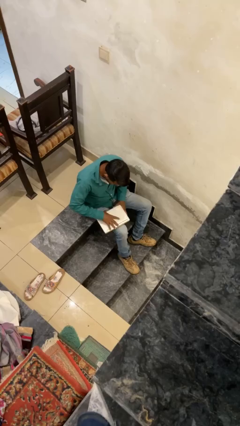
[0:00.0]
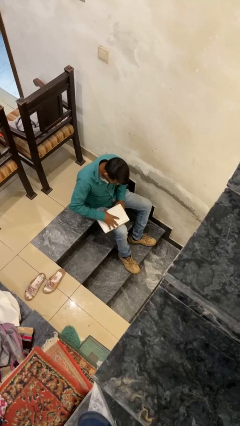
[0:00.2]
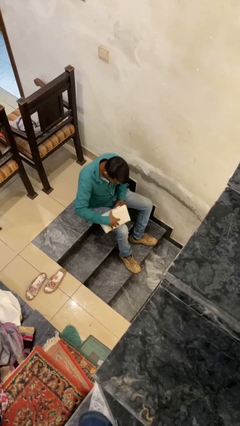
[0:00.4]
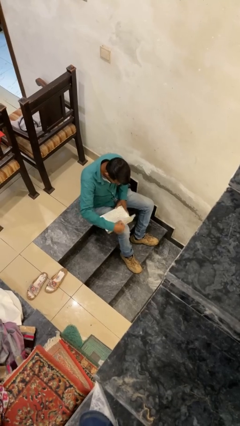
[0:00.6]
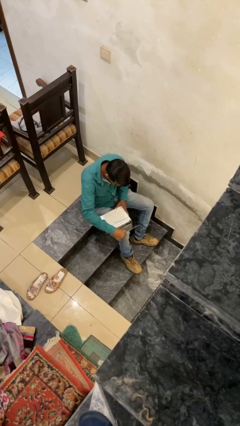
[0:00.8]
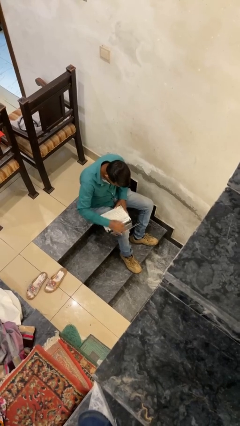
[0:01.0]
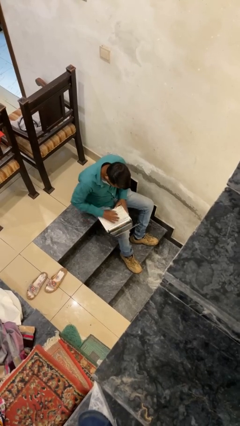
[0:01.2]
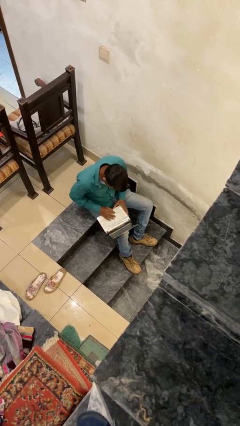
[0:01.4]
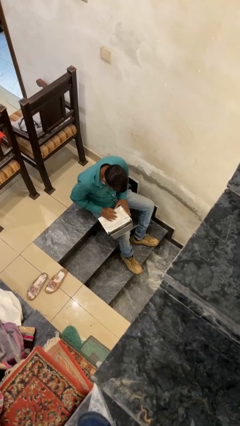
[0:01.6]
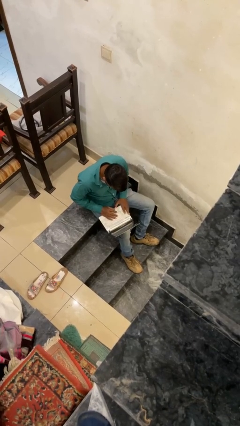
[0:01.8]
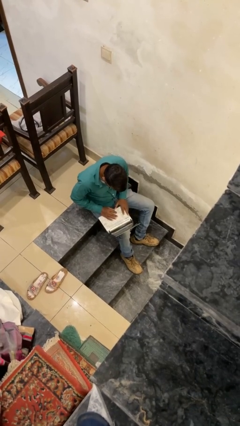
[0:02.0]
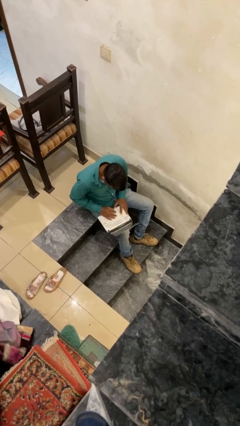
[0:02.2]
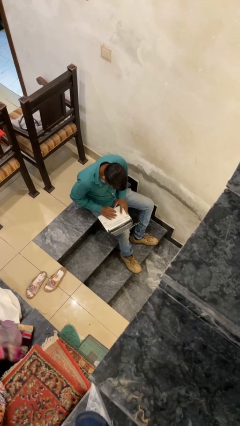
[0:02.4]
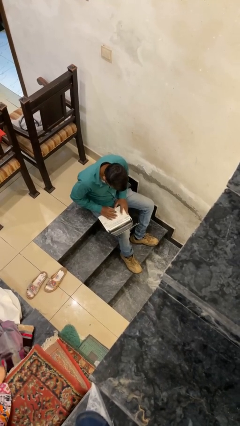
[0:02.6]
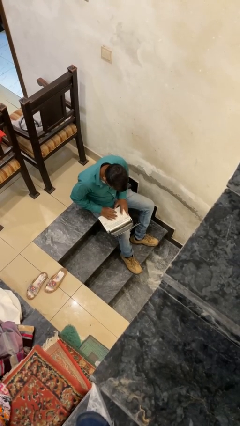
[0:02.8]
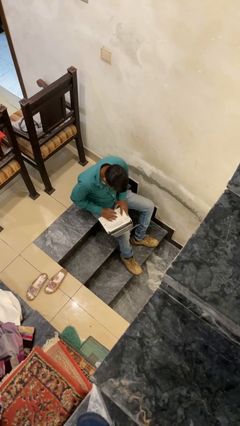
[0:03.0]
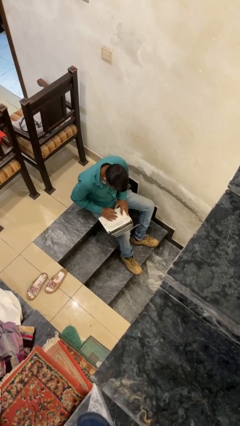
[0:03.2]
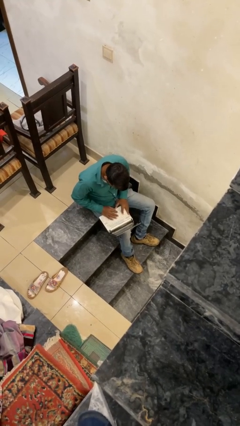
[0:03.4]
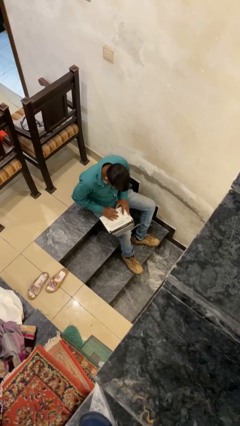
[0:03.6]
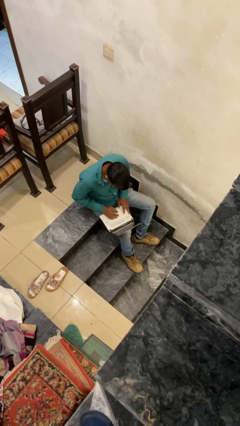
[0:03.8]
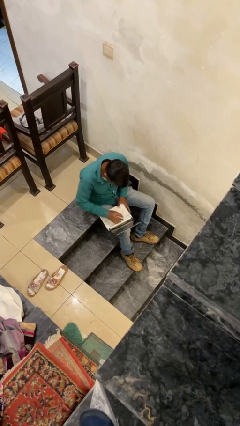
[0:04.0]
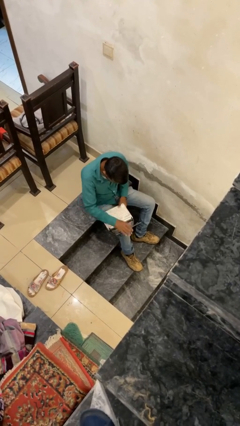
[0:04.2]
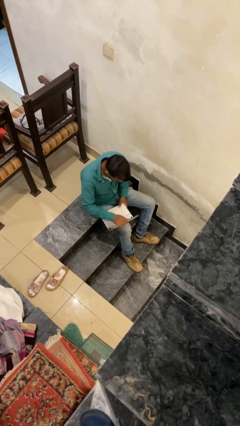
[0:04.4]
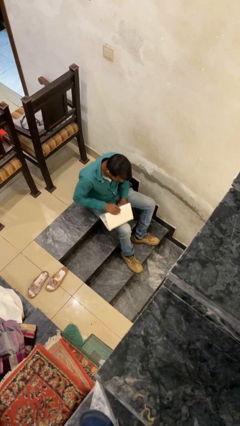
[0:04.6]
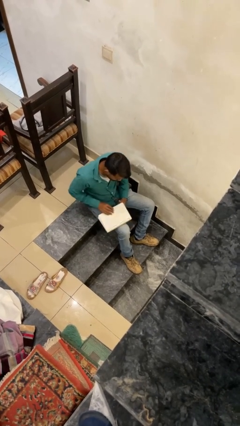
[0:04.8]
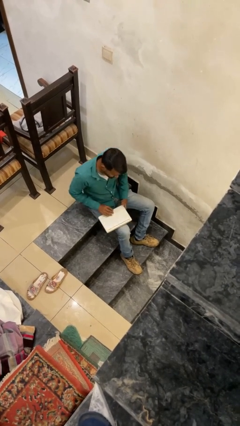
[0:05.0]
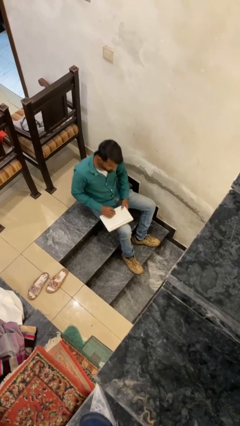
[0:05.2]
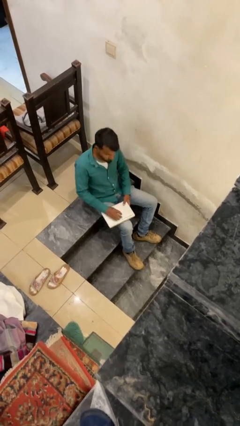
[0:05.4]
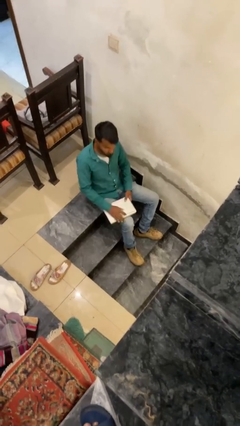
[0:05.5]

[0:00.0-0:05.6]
person interacts with laptop

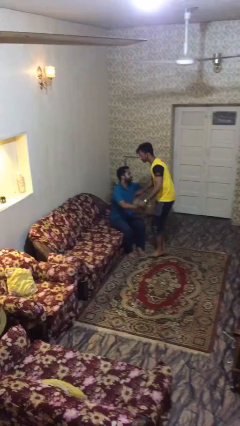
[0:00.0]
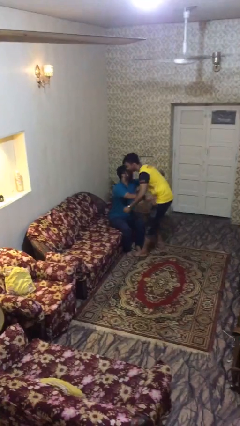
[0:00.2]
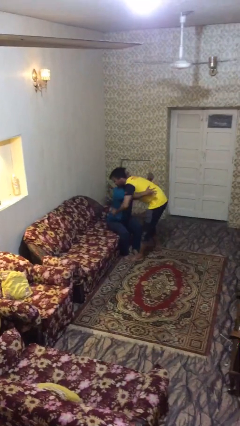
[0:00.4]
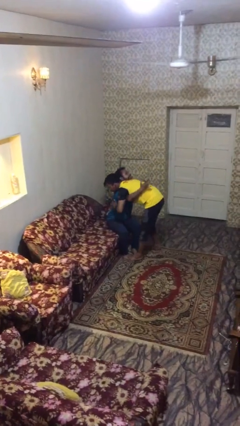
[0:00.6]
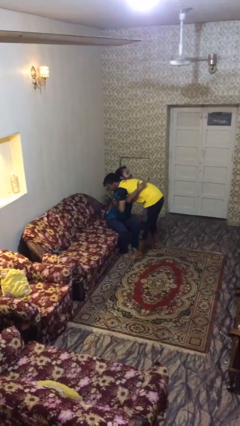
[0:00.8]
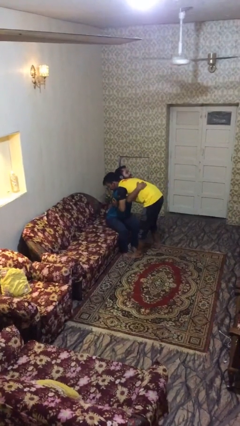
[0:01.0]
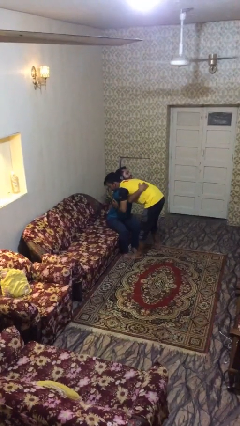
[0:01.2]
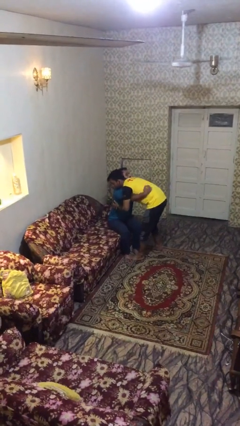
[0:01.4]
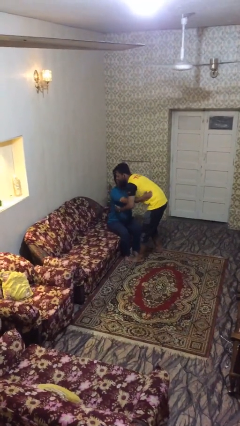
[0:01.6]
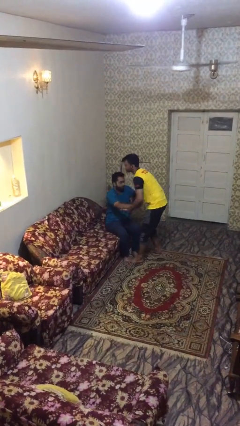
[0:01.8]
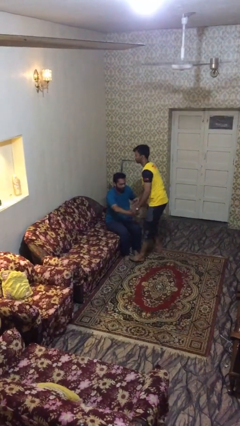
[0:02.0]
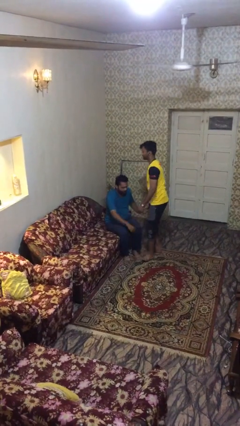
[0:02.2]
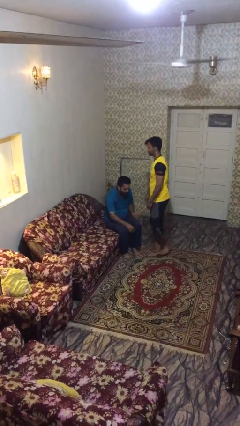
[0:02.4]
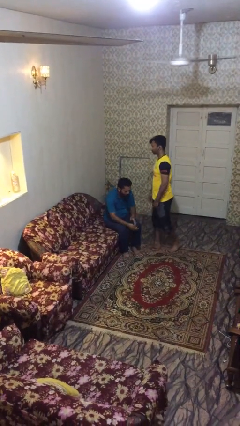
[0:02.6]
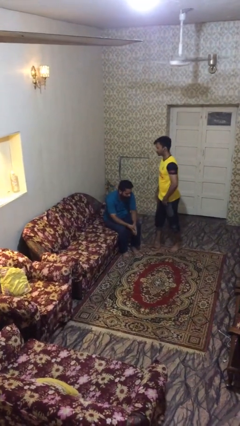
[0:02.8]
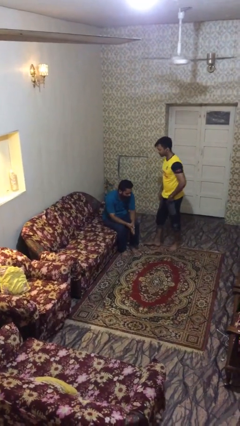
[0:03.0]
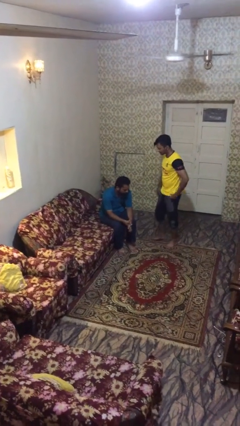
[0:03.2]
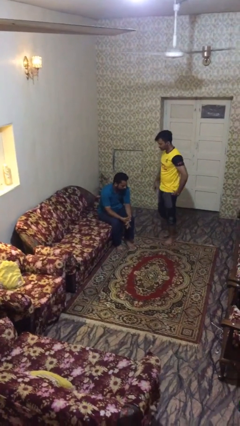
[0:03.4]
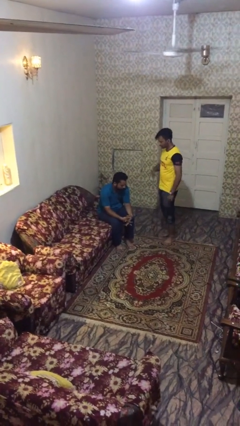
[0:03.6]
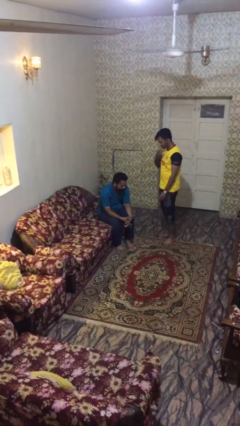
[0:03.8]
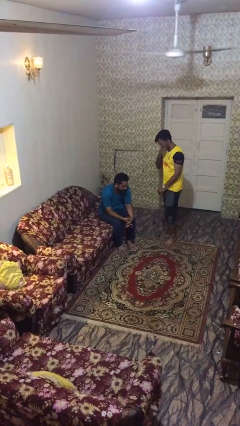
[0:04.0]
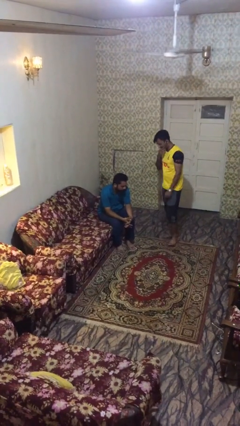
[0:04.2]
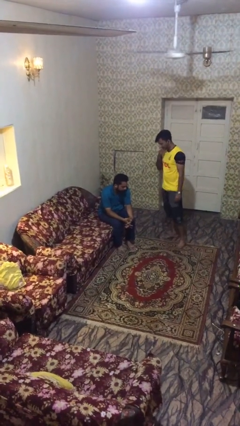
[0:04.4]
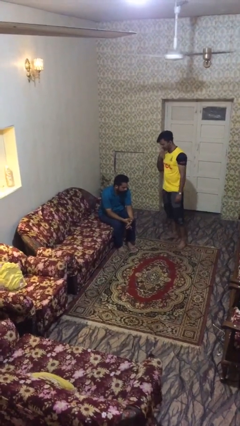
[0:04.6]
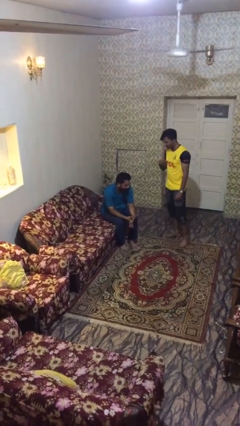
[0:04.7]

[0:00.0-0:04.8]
person embraces person

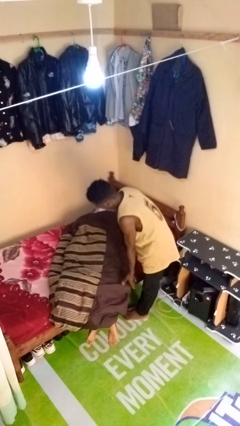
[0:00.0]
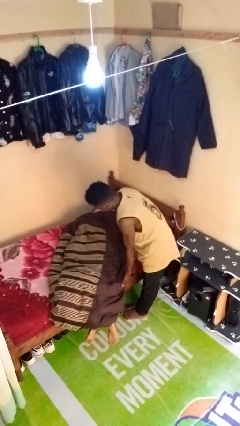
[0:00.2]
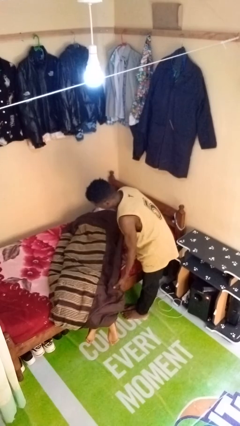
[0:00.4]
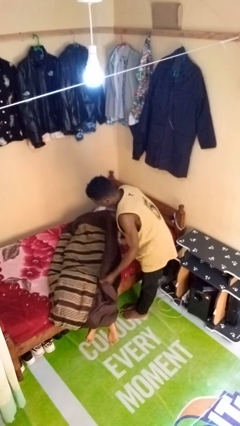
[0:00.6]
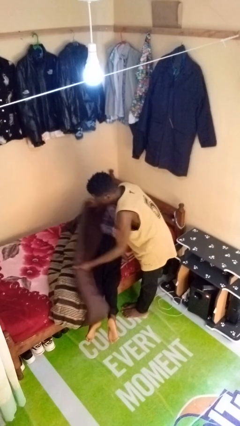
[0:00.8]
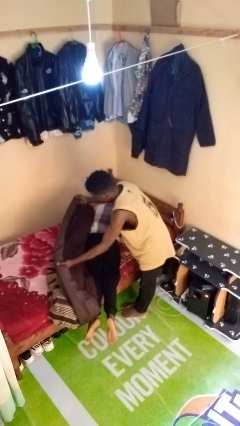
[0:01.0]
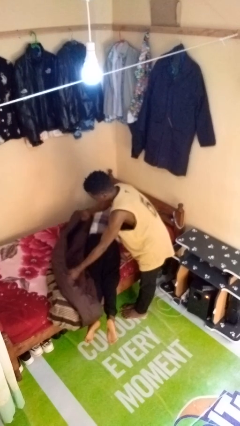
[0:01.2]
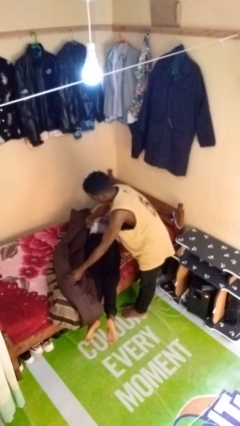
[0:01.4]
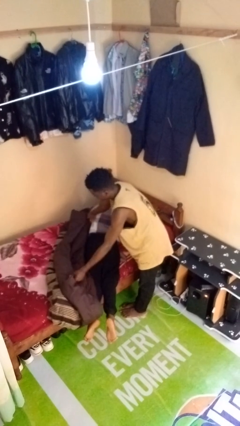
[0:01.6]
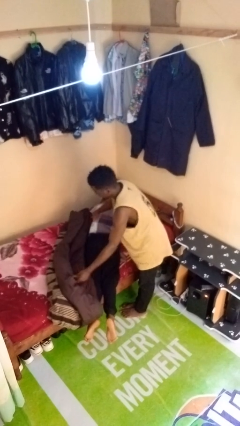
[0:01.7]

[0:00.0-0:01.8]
person uncovers friend with blanket

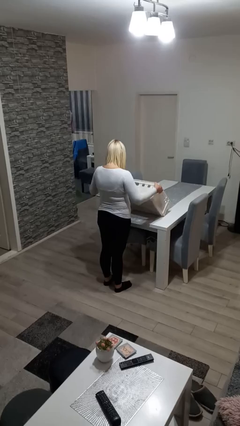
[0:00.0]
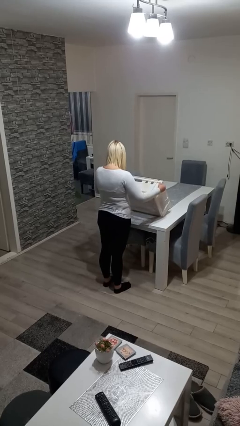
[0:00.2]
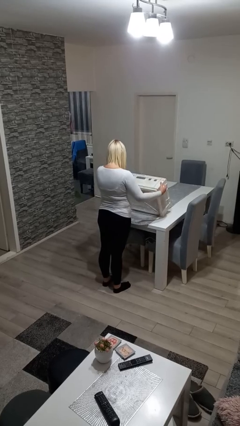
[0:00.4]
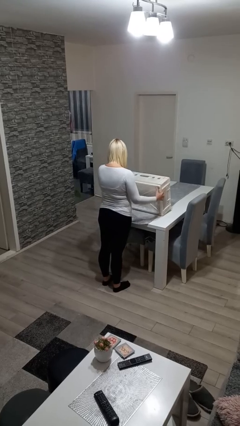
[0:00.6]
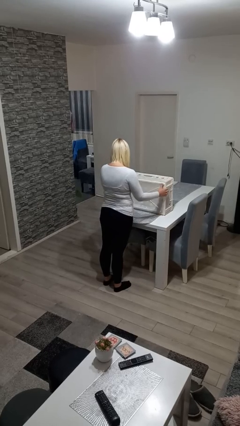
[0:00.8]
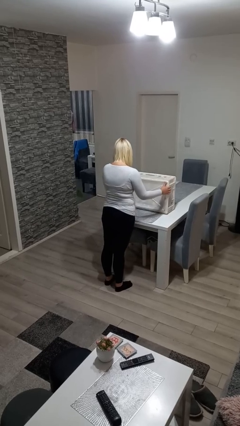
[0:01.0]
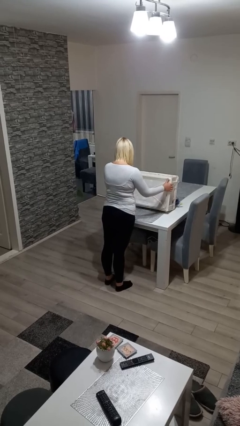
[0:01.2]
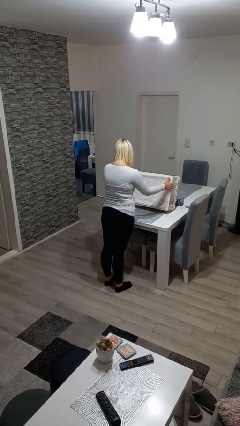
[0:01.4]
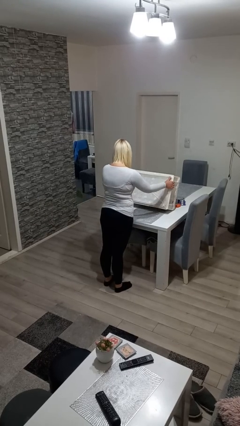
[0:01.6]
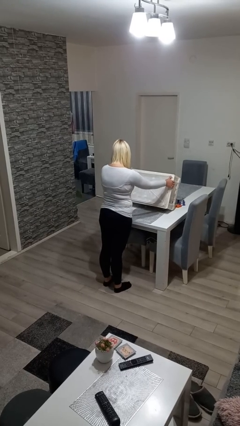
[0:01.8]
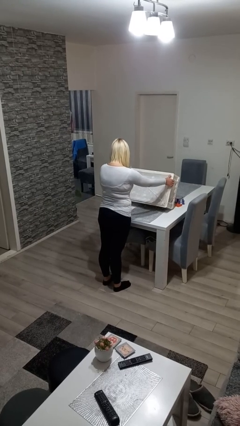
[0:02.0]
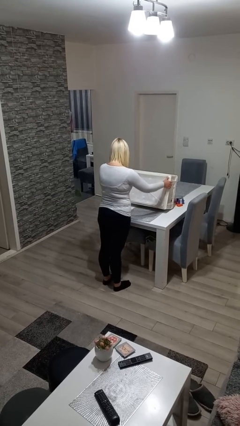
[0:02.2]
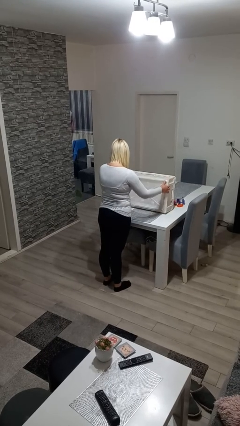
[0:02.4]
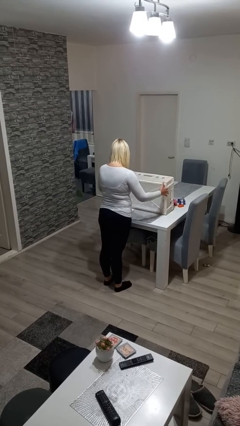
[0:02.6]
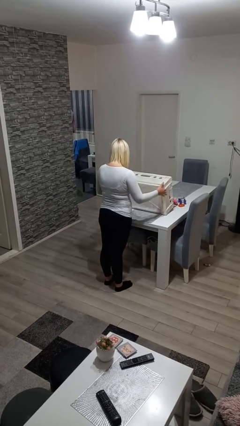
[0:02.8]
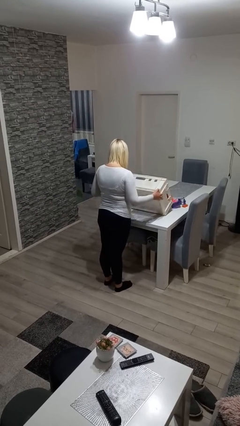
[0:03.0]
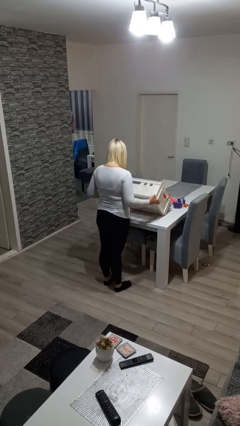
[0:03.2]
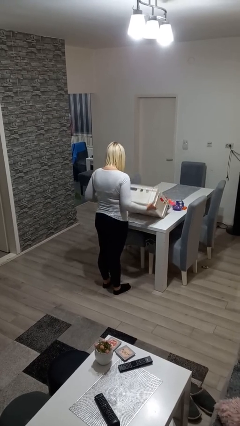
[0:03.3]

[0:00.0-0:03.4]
person unloads box onto table

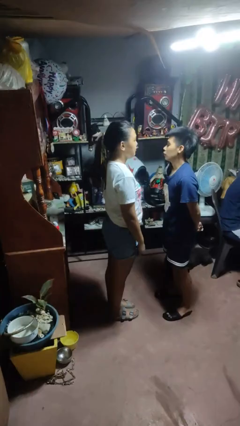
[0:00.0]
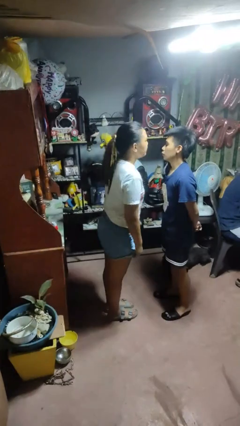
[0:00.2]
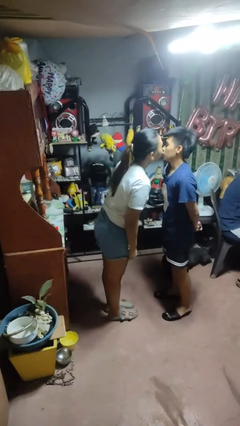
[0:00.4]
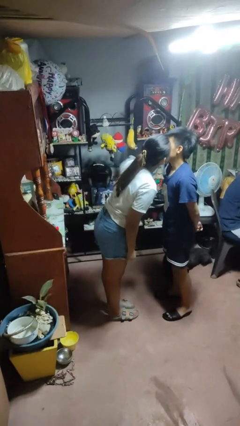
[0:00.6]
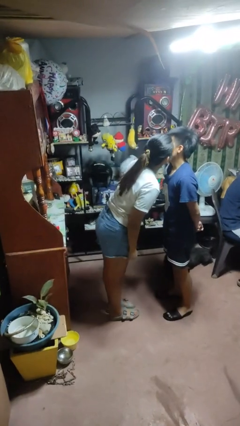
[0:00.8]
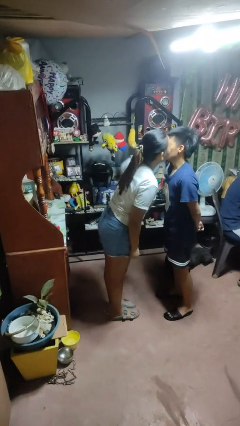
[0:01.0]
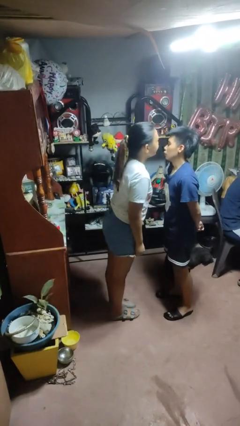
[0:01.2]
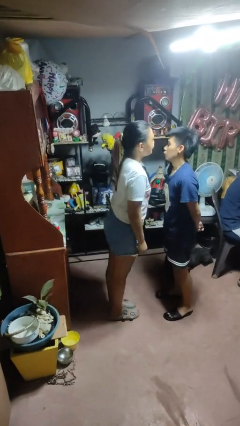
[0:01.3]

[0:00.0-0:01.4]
person kisses cheek of person

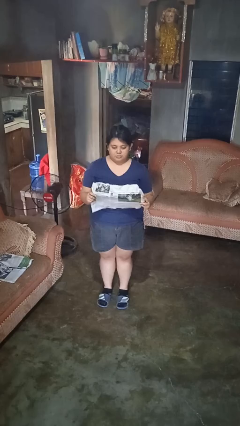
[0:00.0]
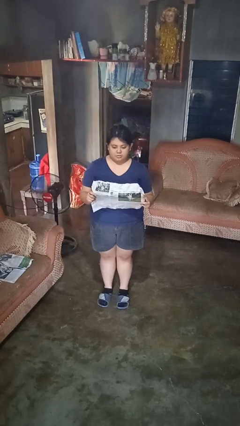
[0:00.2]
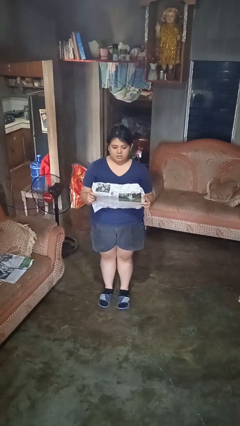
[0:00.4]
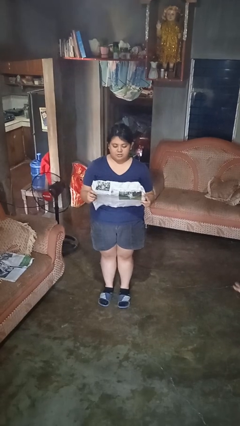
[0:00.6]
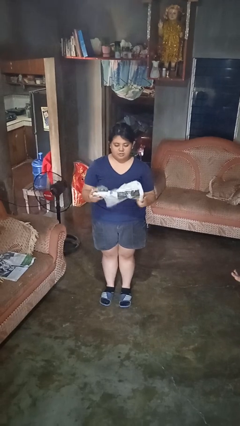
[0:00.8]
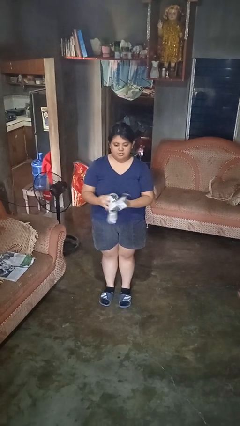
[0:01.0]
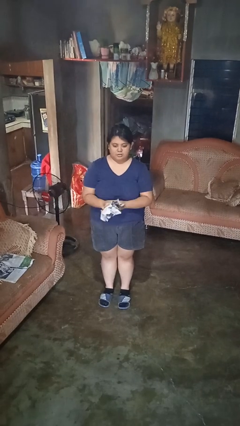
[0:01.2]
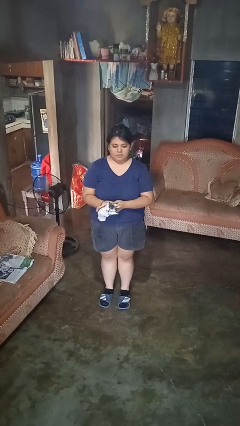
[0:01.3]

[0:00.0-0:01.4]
person crumples paper
